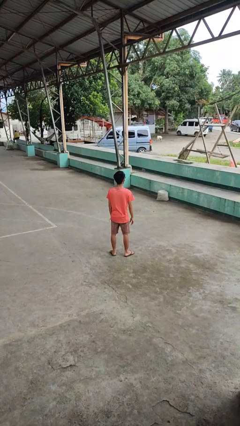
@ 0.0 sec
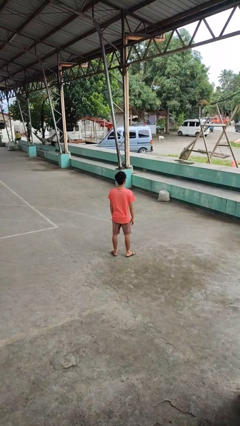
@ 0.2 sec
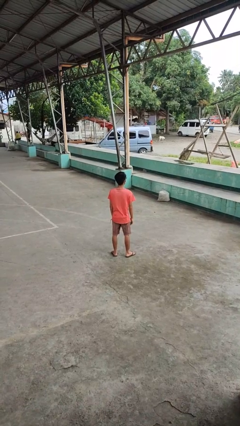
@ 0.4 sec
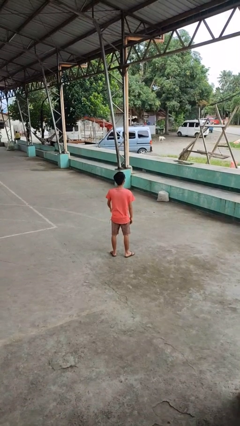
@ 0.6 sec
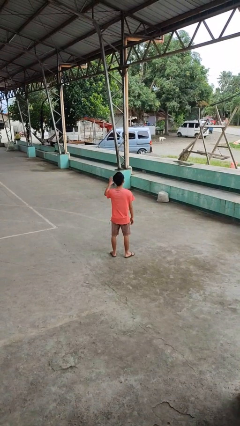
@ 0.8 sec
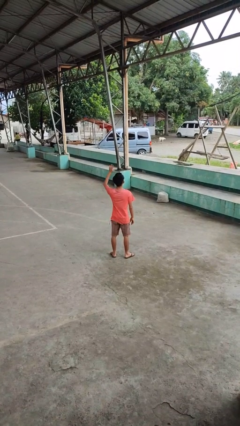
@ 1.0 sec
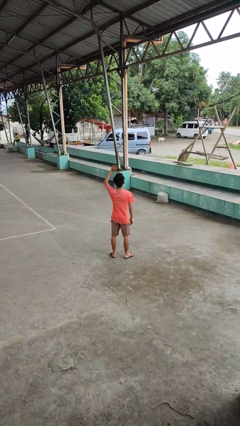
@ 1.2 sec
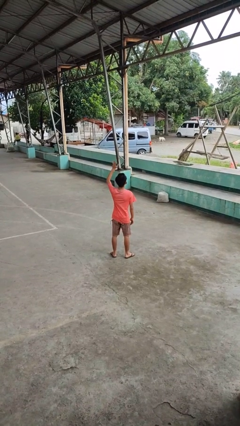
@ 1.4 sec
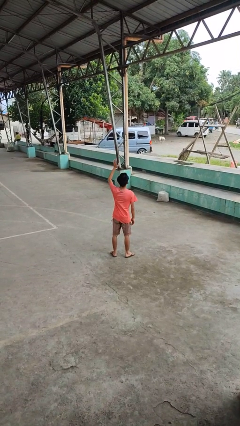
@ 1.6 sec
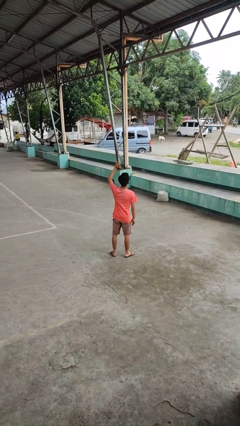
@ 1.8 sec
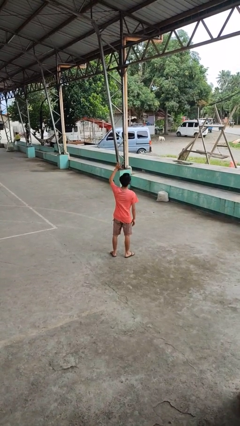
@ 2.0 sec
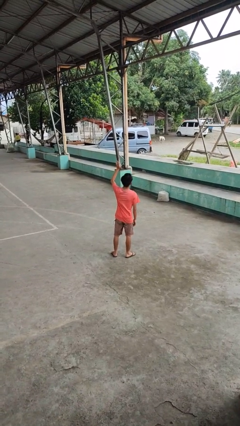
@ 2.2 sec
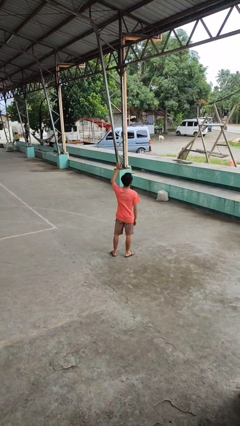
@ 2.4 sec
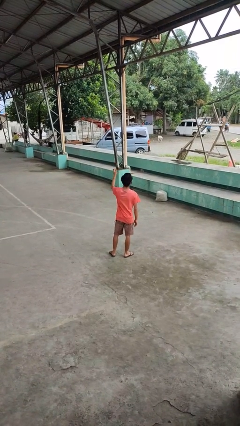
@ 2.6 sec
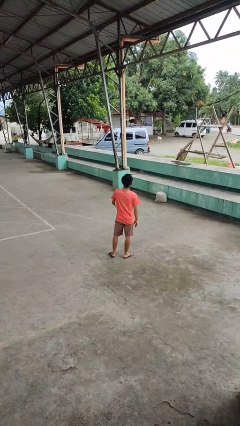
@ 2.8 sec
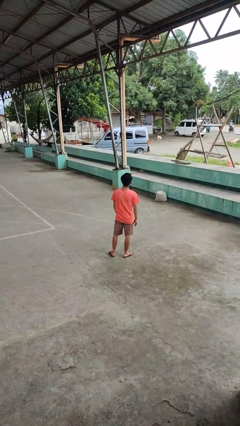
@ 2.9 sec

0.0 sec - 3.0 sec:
person waves at person

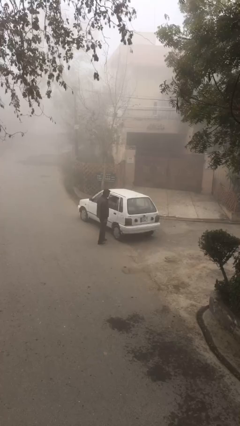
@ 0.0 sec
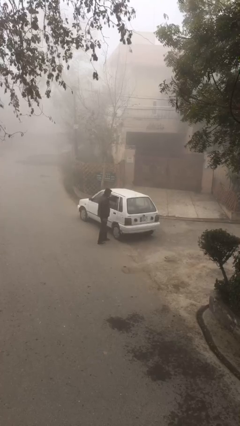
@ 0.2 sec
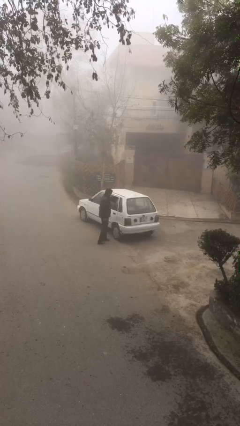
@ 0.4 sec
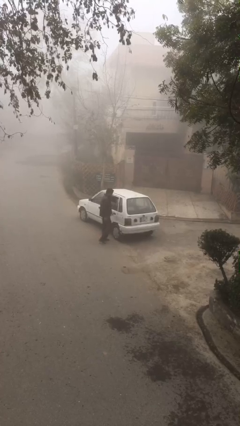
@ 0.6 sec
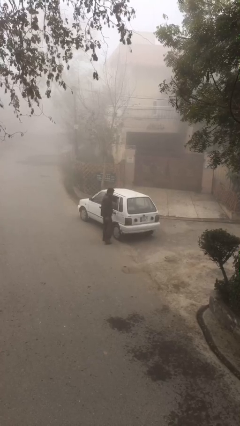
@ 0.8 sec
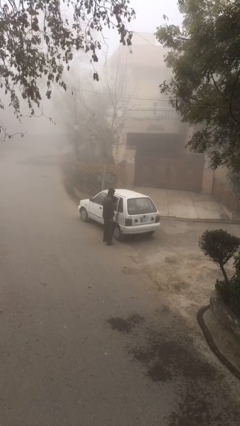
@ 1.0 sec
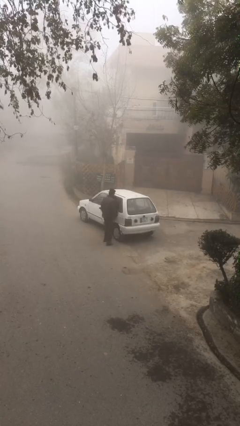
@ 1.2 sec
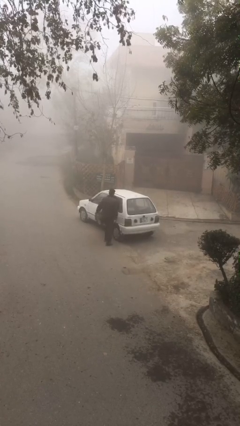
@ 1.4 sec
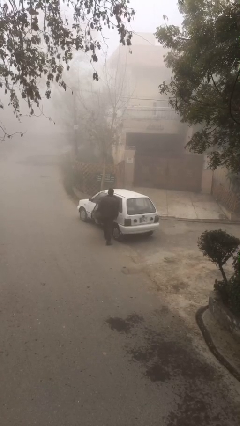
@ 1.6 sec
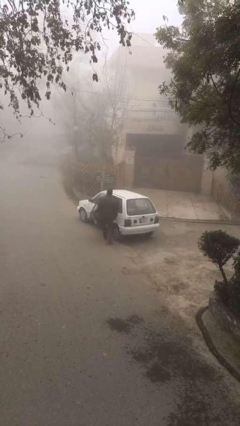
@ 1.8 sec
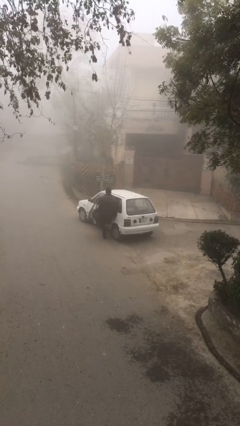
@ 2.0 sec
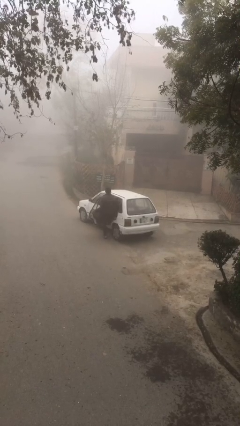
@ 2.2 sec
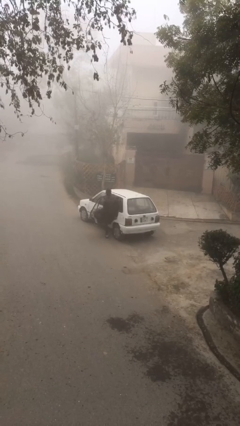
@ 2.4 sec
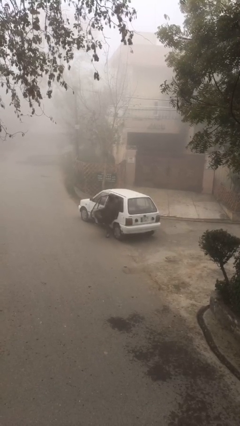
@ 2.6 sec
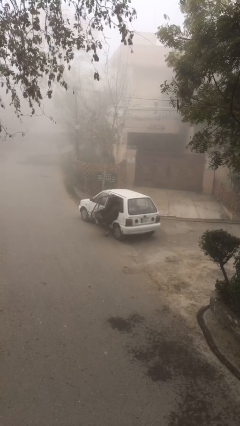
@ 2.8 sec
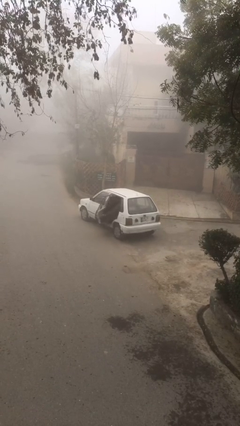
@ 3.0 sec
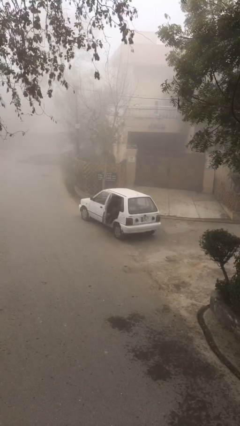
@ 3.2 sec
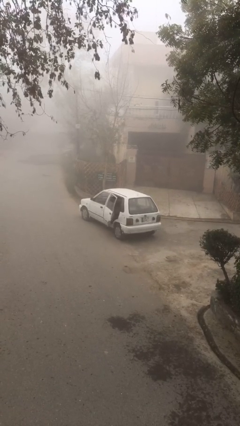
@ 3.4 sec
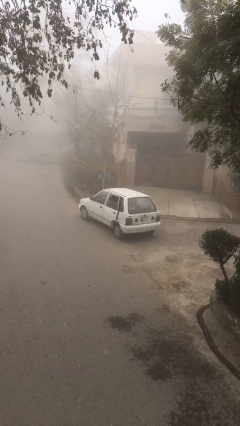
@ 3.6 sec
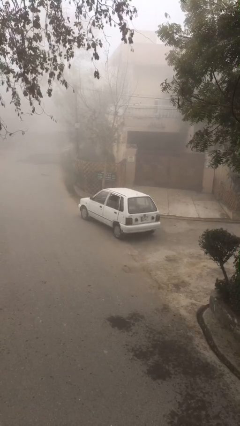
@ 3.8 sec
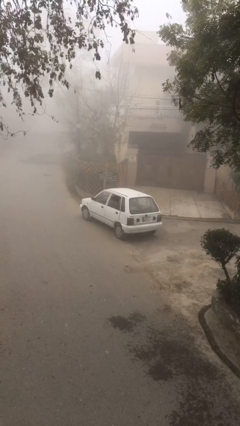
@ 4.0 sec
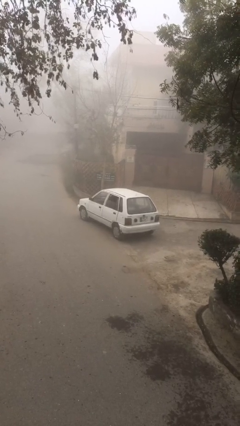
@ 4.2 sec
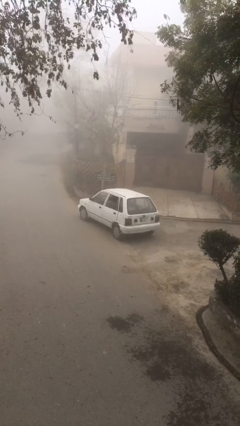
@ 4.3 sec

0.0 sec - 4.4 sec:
car picks up person

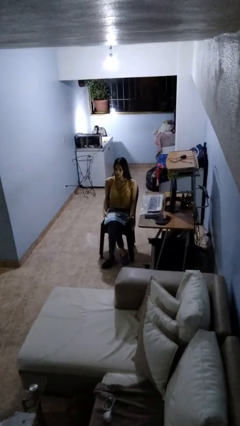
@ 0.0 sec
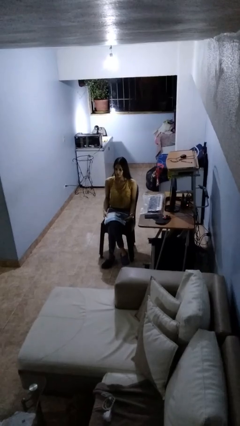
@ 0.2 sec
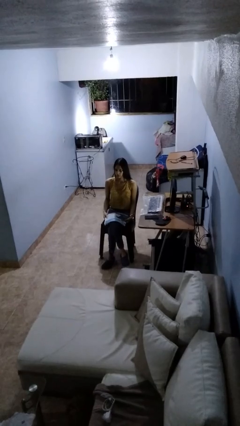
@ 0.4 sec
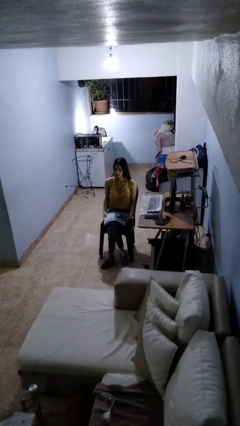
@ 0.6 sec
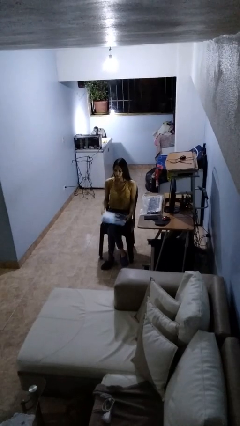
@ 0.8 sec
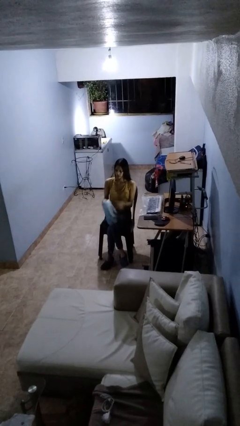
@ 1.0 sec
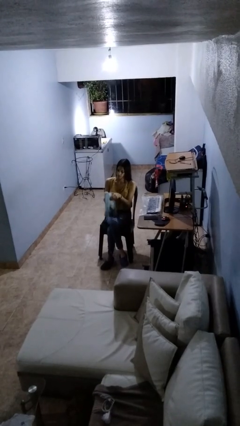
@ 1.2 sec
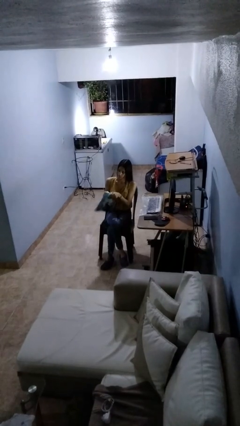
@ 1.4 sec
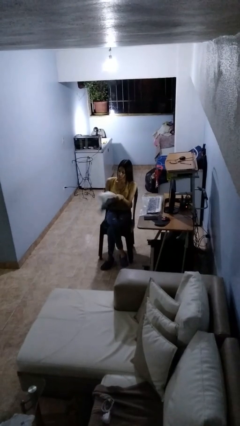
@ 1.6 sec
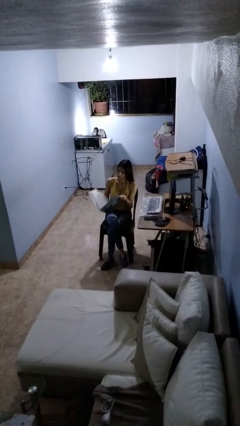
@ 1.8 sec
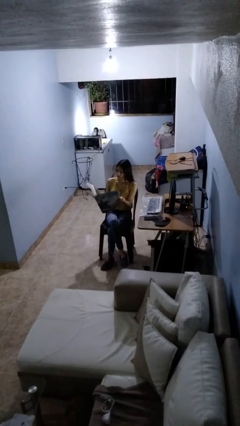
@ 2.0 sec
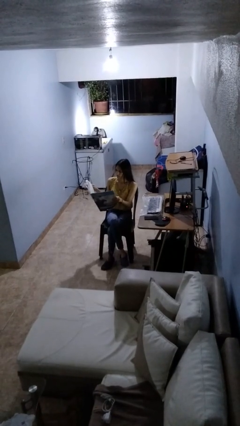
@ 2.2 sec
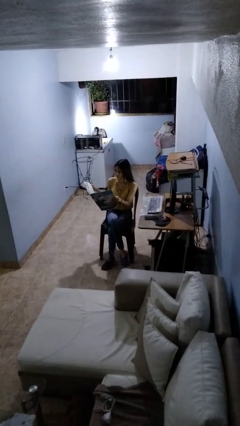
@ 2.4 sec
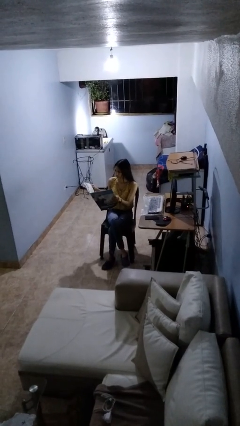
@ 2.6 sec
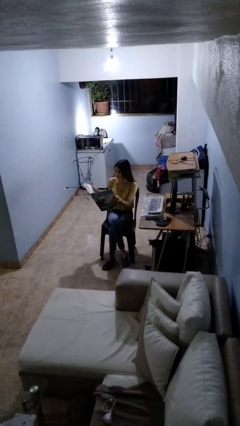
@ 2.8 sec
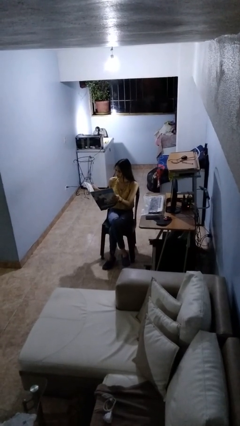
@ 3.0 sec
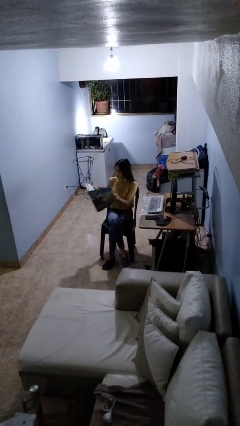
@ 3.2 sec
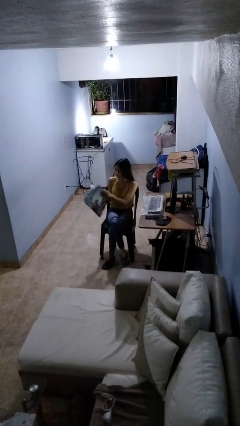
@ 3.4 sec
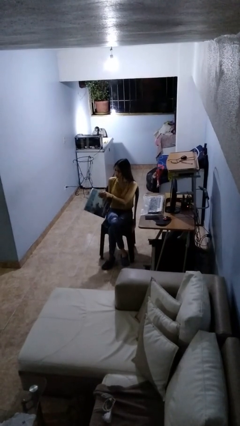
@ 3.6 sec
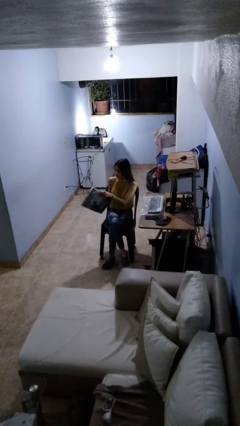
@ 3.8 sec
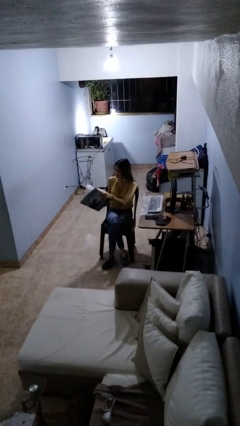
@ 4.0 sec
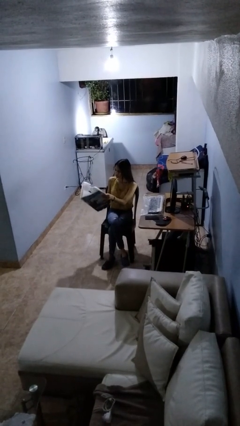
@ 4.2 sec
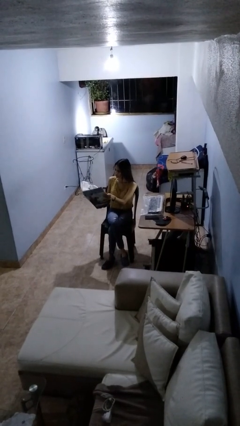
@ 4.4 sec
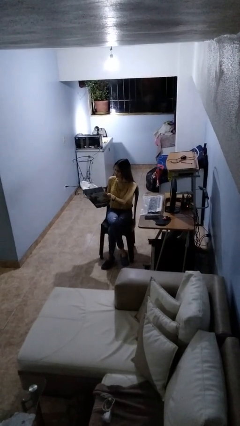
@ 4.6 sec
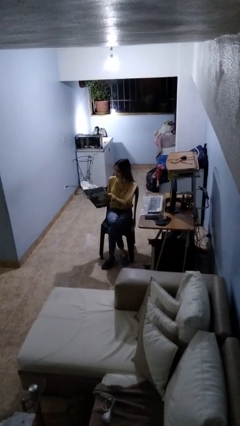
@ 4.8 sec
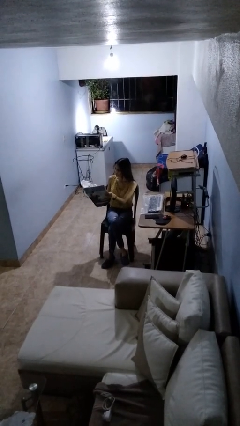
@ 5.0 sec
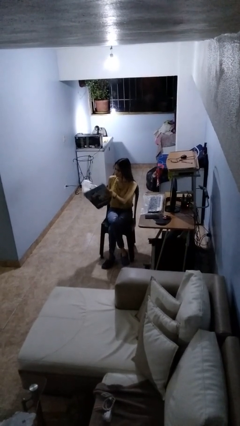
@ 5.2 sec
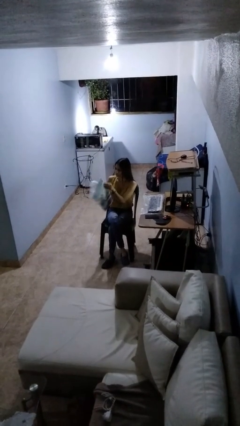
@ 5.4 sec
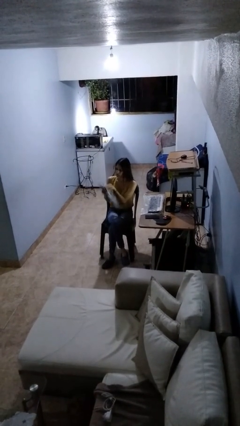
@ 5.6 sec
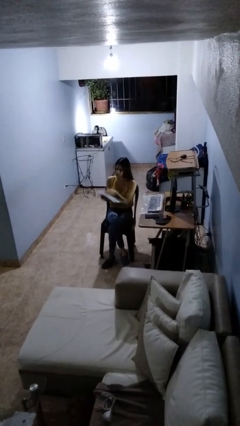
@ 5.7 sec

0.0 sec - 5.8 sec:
person reads newspaper

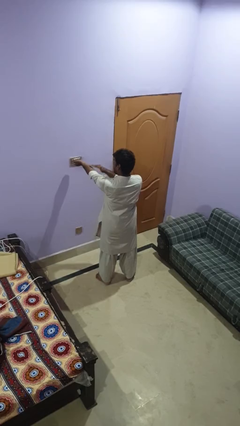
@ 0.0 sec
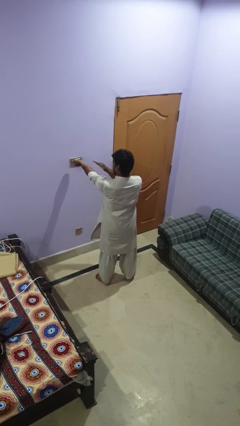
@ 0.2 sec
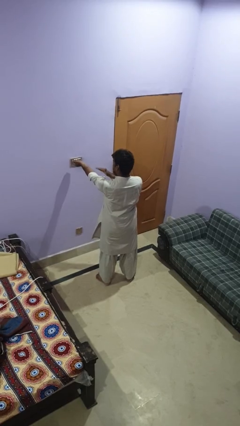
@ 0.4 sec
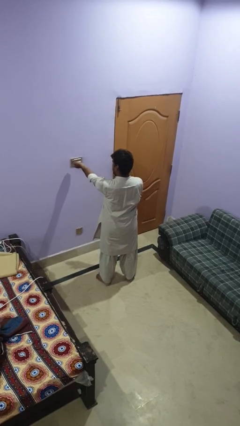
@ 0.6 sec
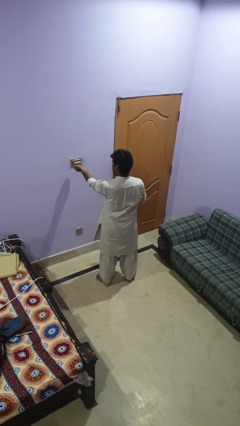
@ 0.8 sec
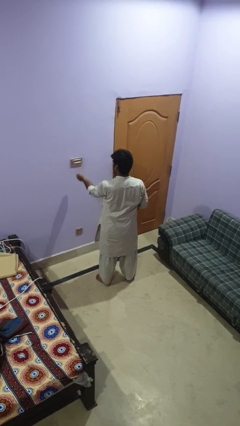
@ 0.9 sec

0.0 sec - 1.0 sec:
person swats bug

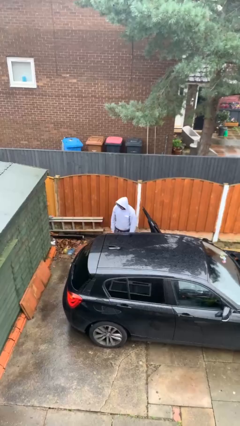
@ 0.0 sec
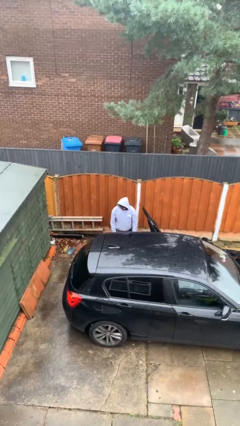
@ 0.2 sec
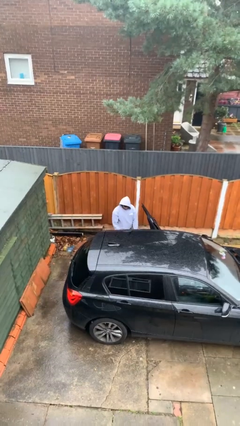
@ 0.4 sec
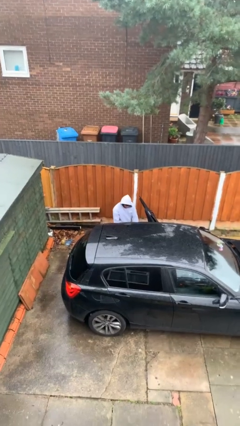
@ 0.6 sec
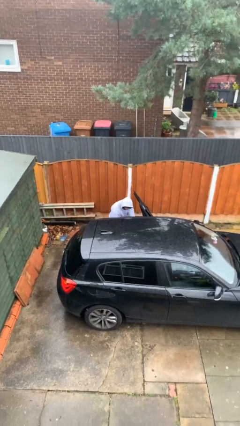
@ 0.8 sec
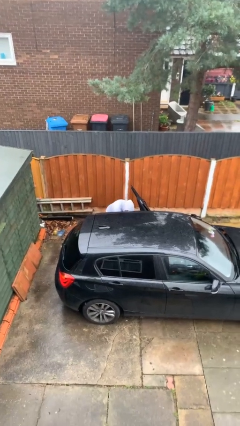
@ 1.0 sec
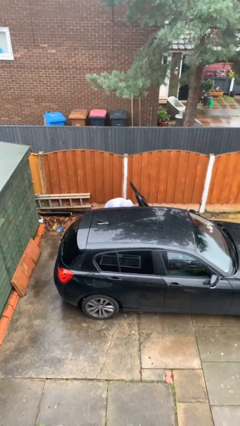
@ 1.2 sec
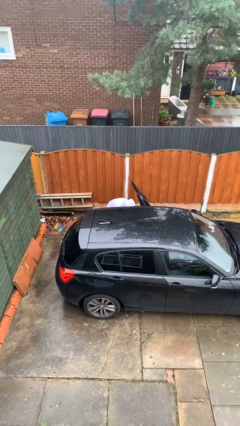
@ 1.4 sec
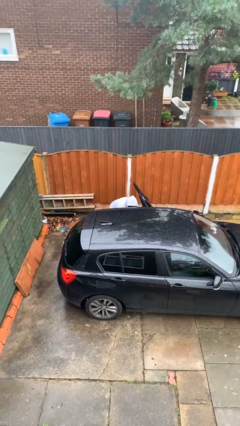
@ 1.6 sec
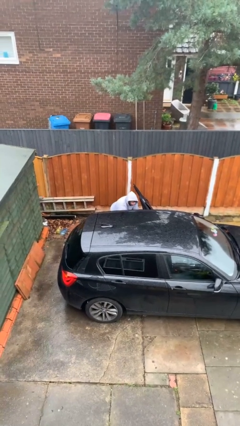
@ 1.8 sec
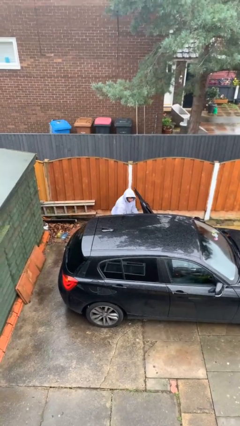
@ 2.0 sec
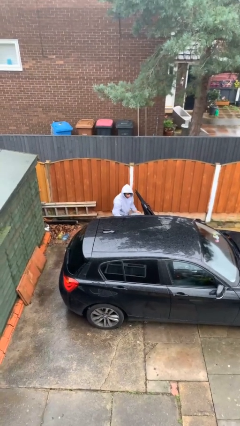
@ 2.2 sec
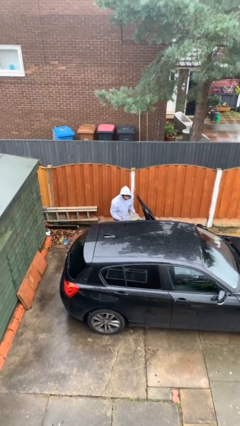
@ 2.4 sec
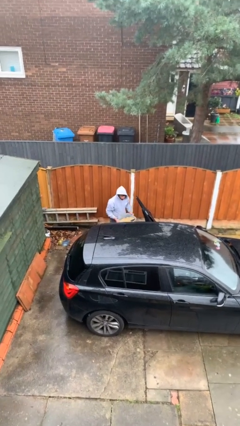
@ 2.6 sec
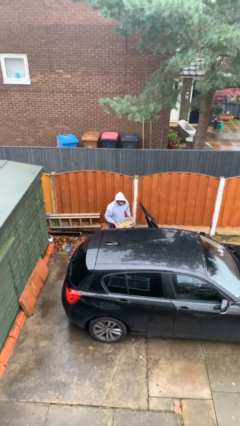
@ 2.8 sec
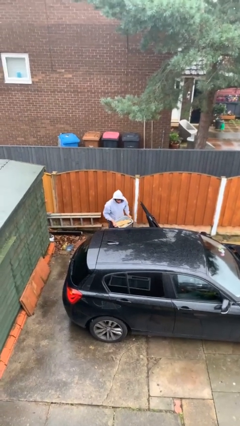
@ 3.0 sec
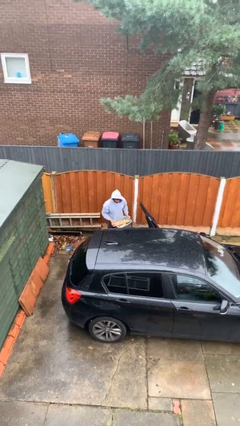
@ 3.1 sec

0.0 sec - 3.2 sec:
person unloads car
